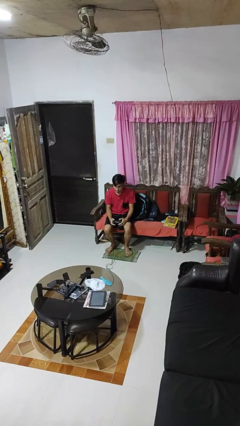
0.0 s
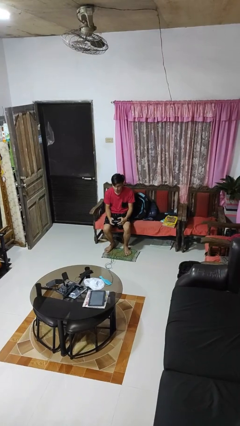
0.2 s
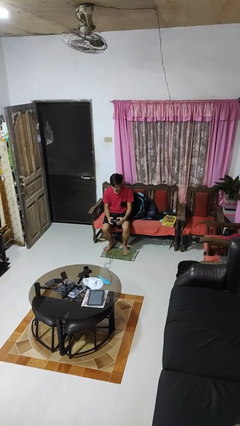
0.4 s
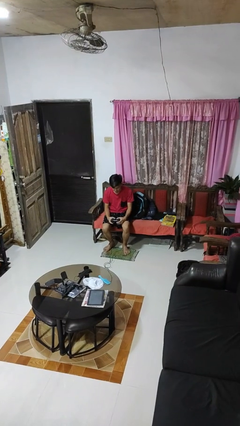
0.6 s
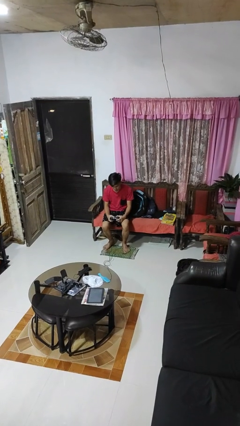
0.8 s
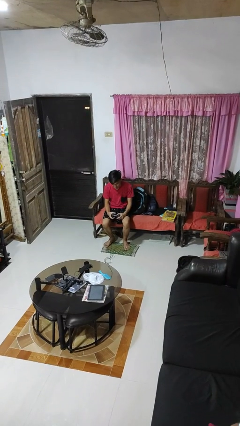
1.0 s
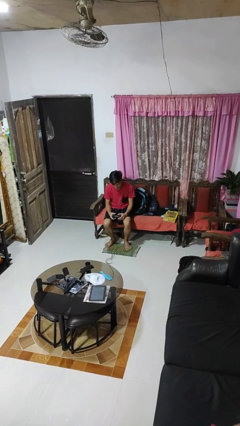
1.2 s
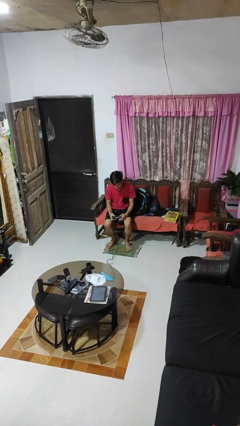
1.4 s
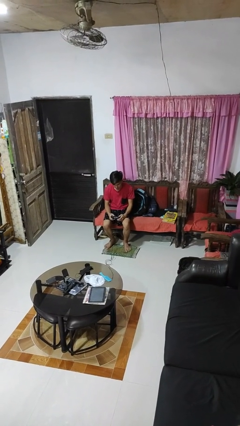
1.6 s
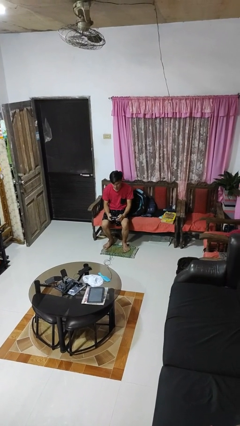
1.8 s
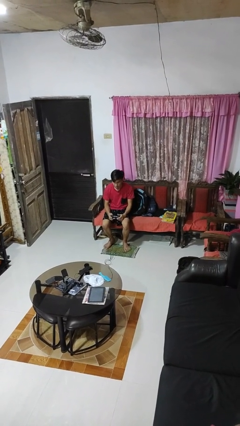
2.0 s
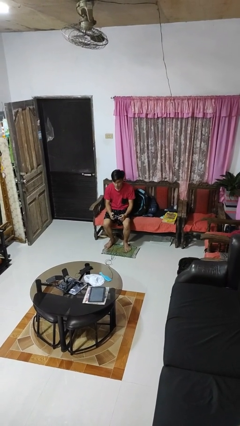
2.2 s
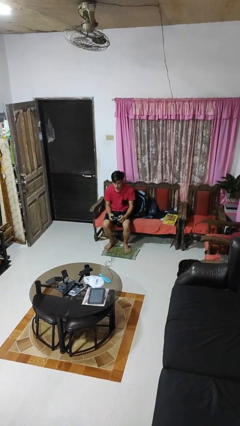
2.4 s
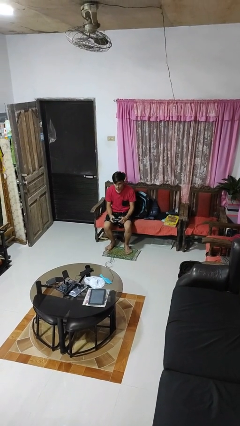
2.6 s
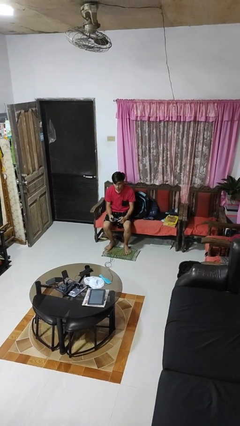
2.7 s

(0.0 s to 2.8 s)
person interacts with handheld game

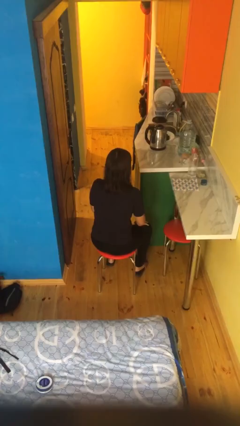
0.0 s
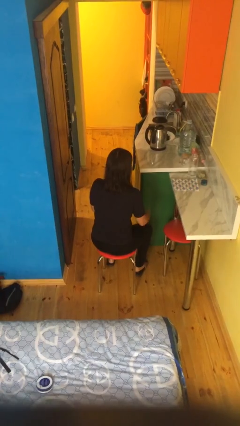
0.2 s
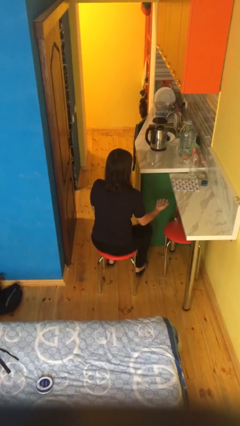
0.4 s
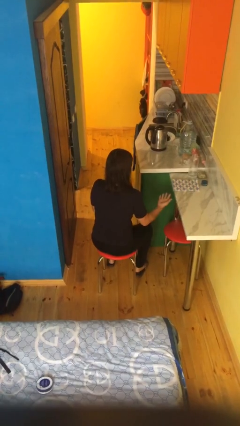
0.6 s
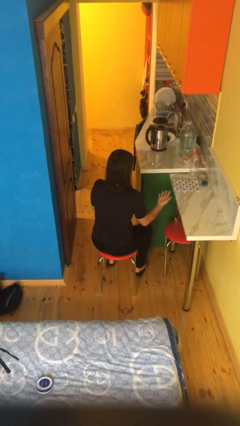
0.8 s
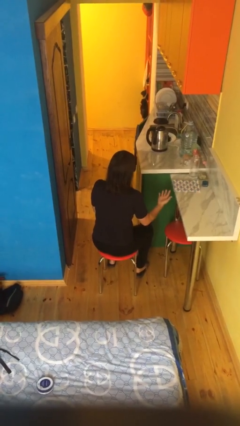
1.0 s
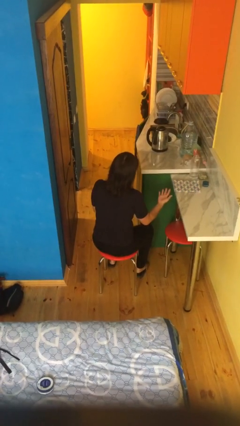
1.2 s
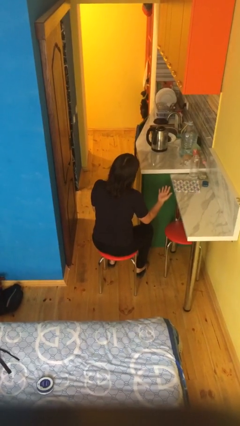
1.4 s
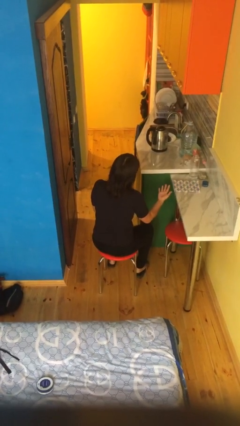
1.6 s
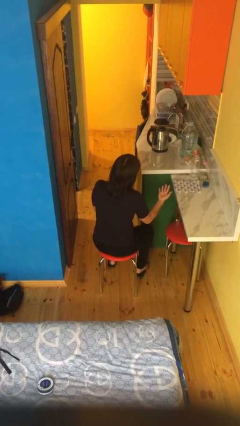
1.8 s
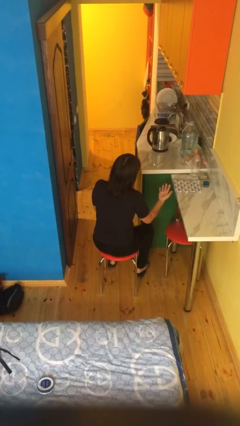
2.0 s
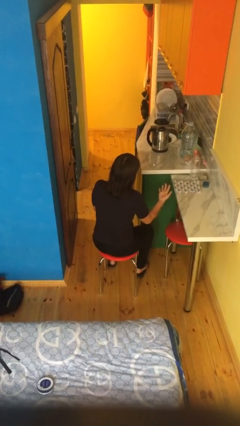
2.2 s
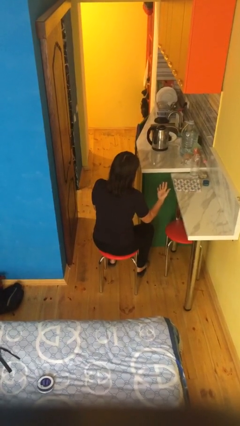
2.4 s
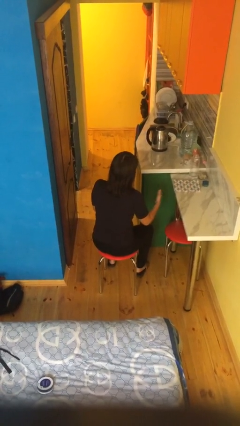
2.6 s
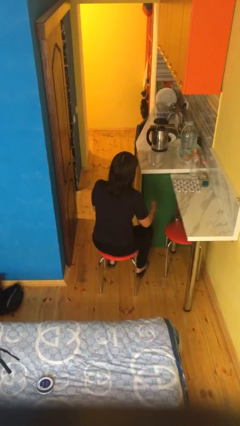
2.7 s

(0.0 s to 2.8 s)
person looks at hands in lap

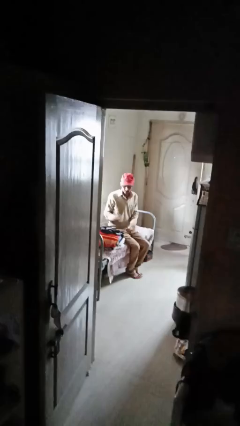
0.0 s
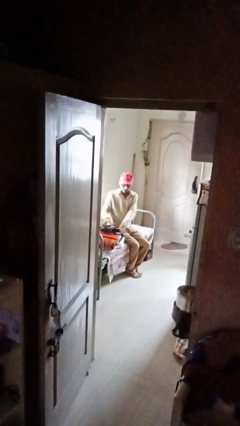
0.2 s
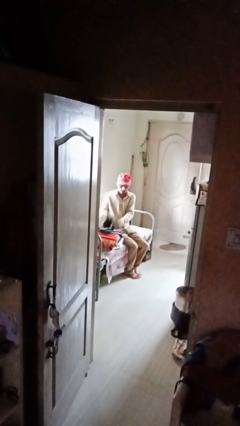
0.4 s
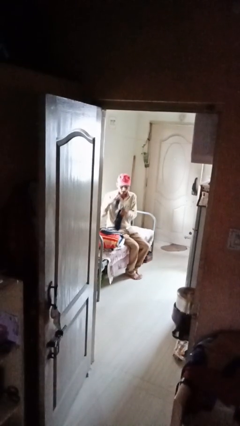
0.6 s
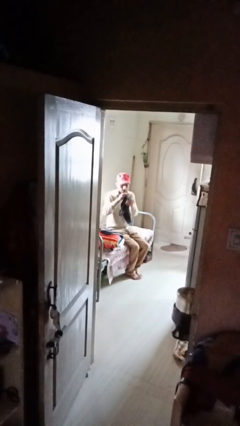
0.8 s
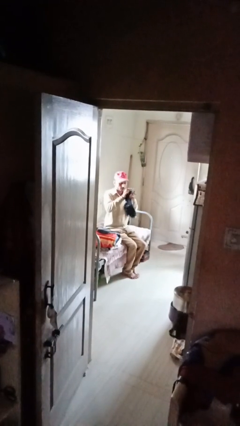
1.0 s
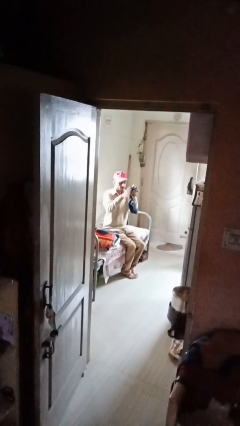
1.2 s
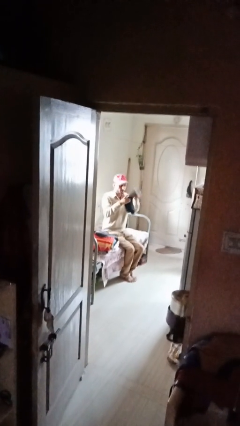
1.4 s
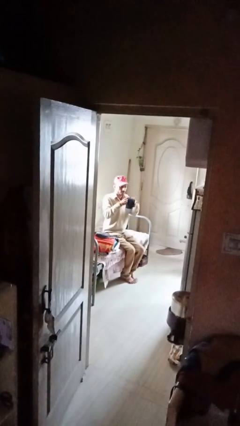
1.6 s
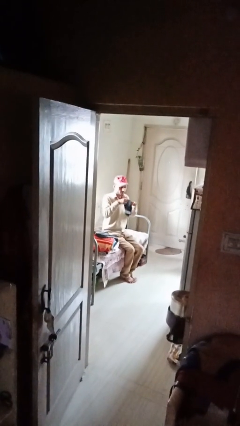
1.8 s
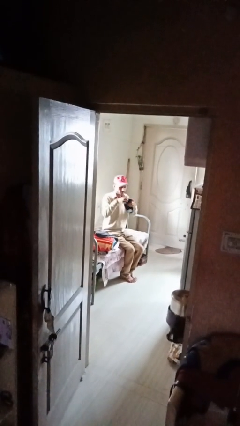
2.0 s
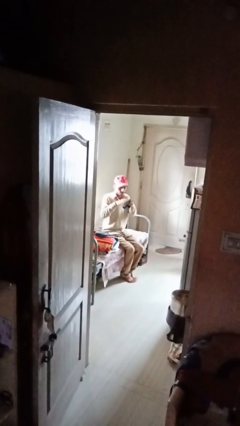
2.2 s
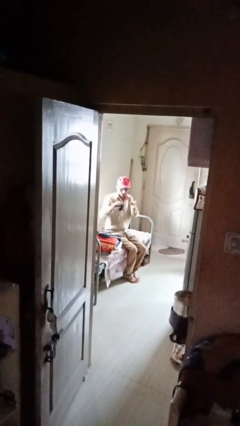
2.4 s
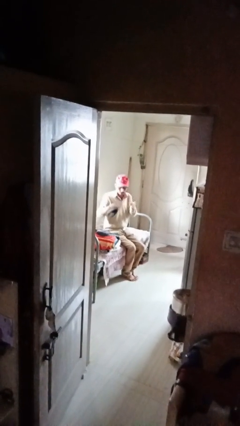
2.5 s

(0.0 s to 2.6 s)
person folds socks

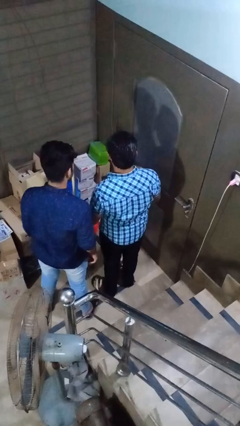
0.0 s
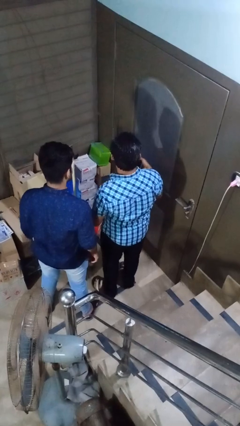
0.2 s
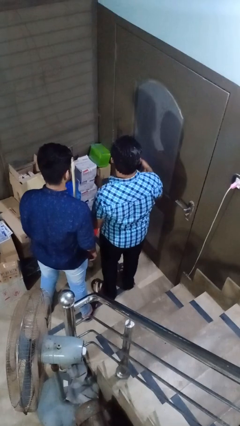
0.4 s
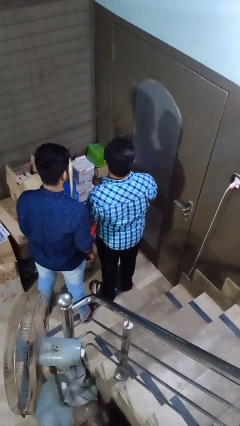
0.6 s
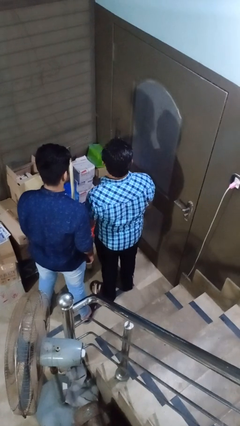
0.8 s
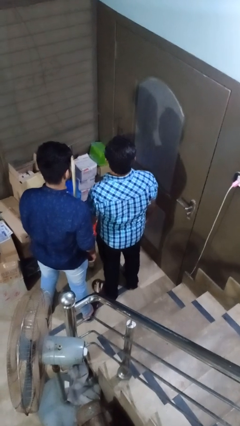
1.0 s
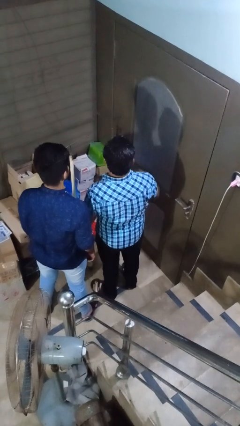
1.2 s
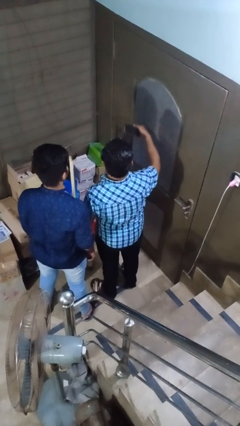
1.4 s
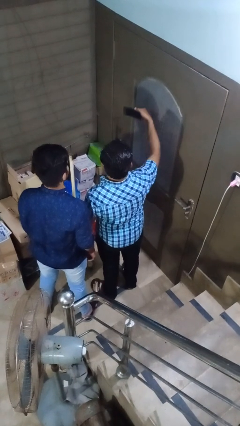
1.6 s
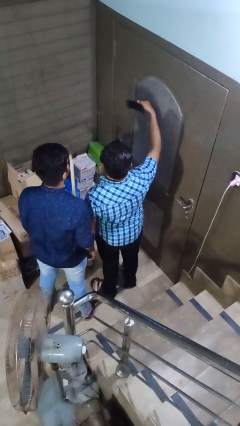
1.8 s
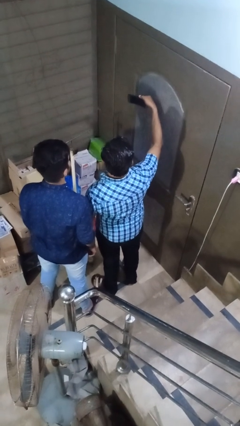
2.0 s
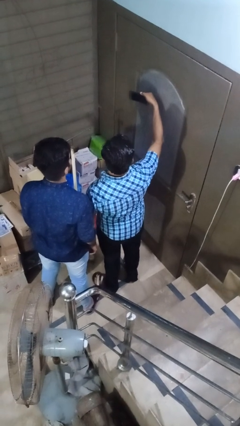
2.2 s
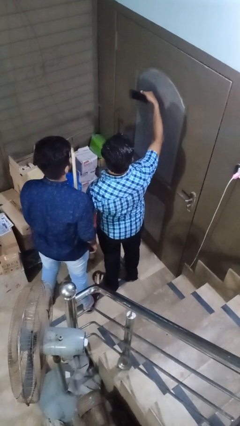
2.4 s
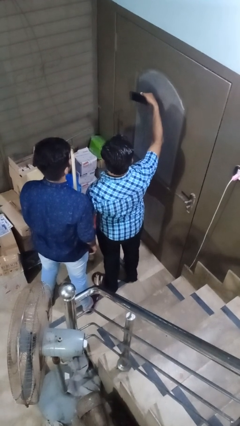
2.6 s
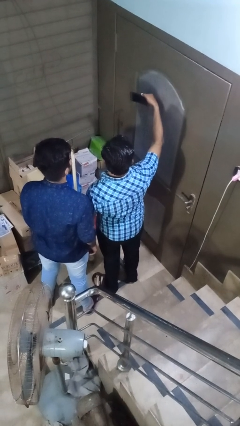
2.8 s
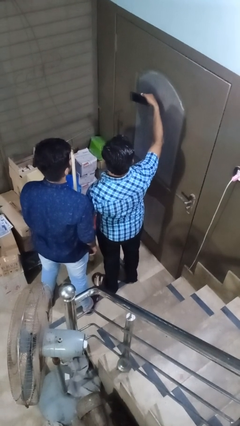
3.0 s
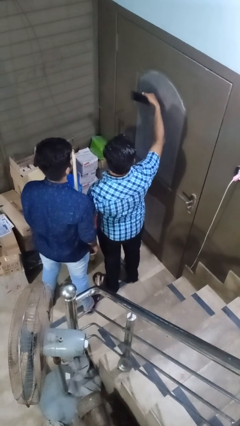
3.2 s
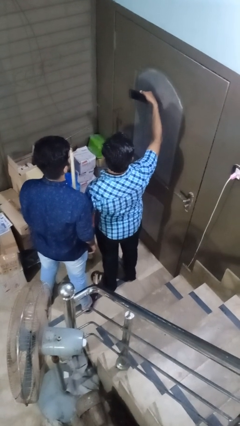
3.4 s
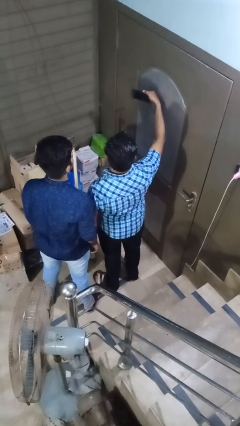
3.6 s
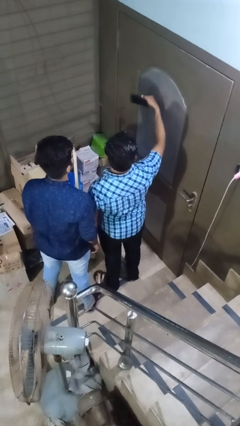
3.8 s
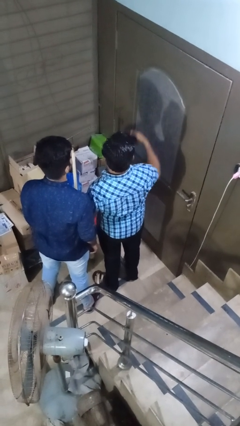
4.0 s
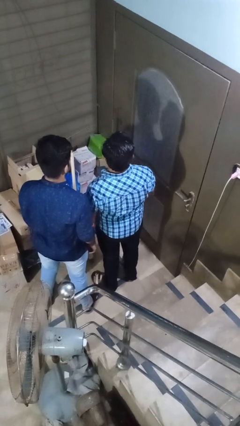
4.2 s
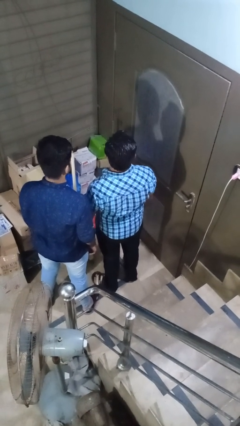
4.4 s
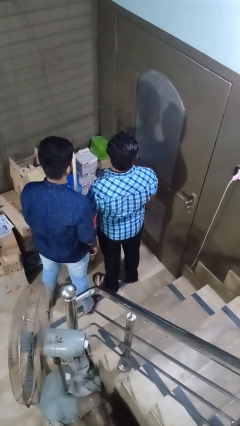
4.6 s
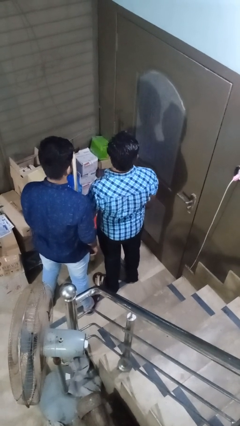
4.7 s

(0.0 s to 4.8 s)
person takes selfie with person

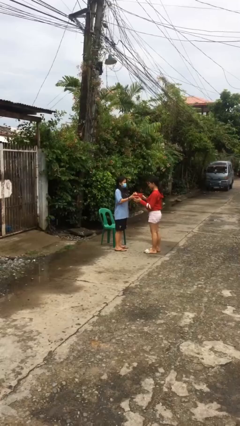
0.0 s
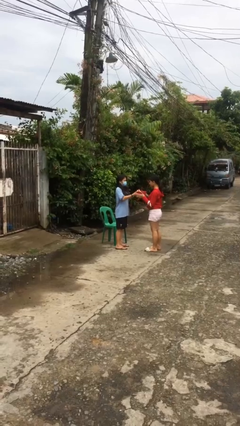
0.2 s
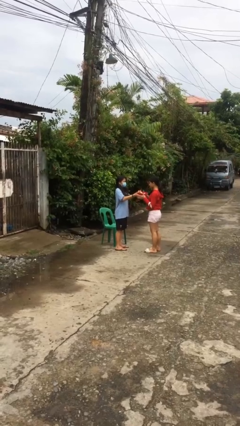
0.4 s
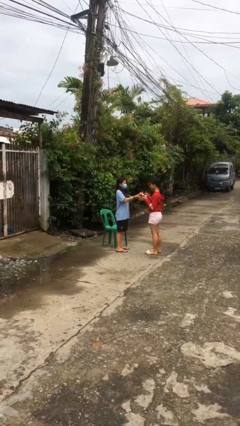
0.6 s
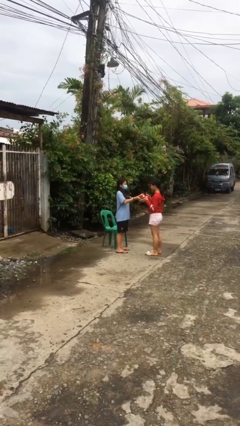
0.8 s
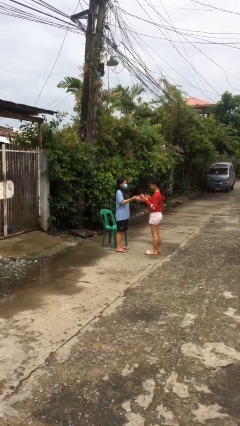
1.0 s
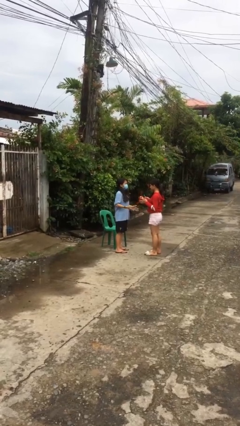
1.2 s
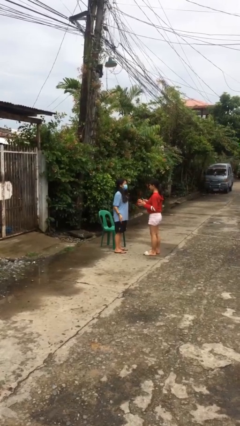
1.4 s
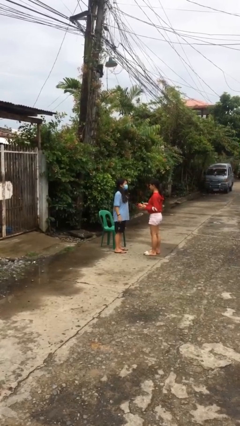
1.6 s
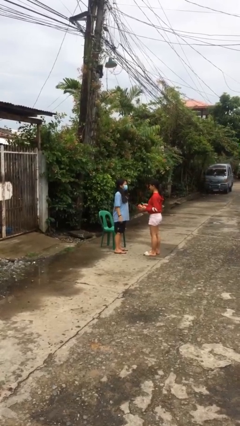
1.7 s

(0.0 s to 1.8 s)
person transfers object to person

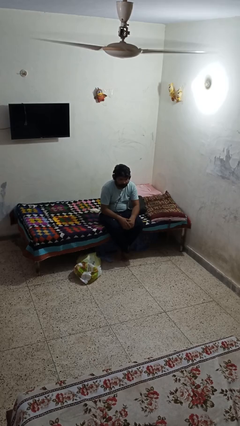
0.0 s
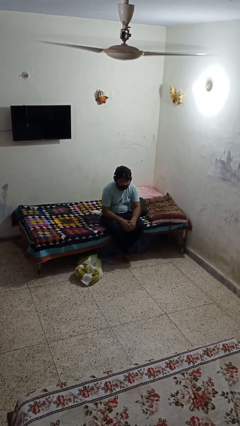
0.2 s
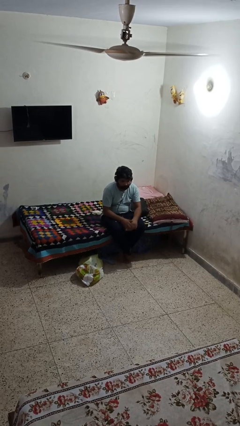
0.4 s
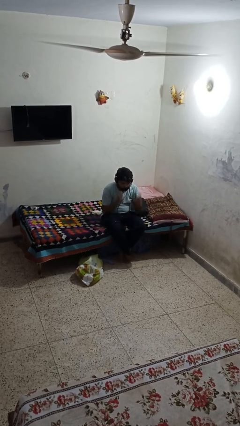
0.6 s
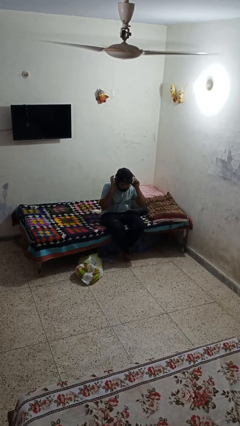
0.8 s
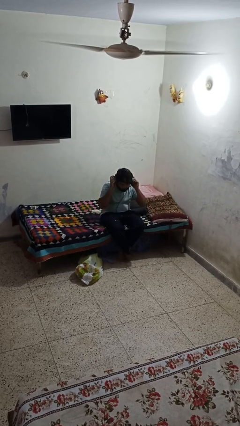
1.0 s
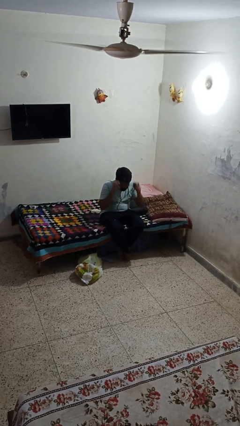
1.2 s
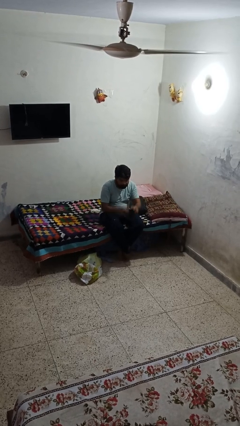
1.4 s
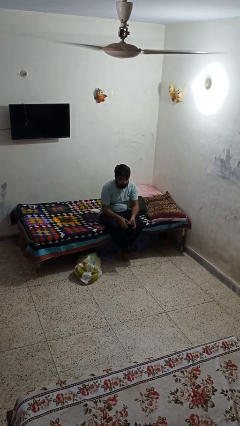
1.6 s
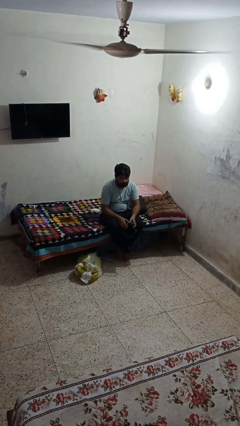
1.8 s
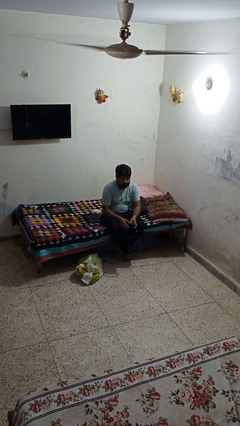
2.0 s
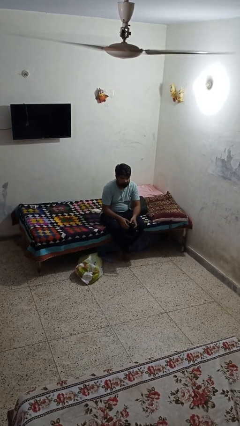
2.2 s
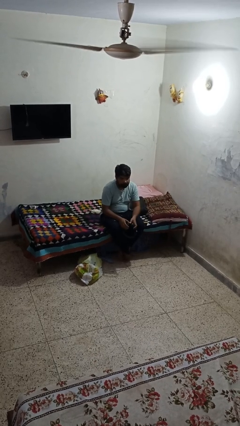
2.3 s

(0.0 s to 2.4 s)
person takes off headphones
